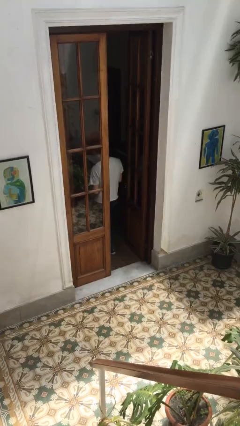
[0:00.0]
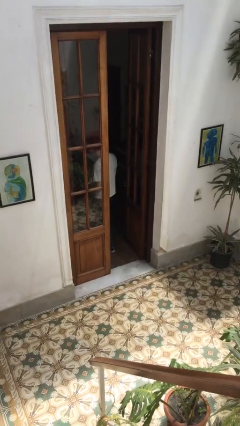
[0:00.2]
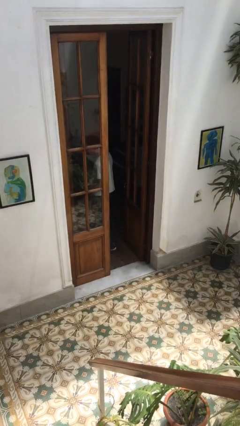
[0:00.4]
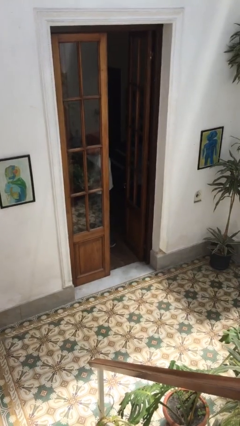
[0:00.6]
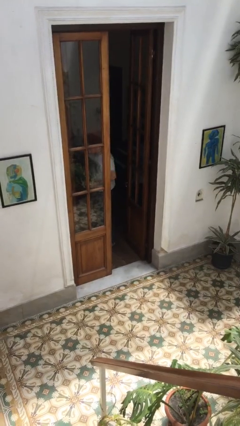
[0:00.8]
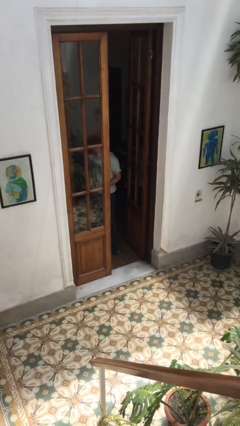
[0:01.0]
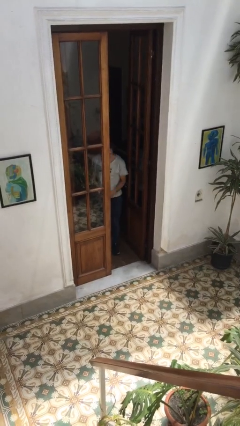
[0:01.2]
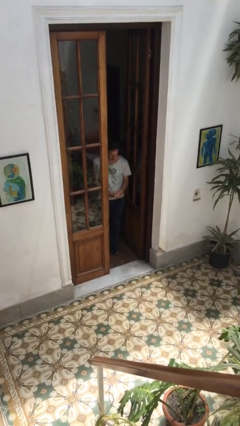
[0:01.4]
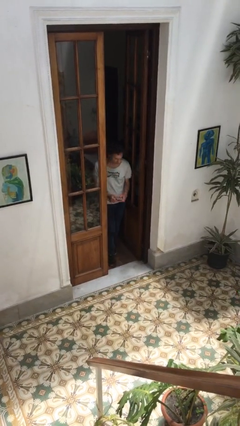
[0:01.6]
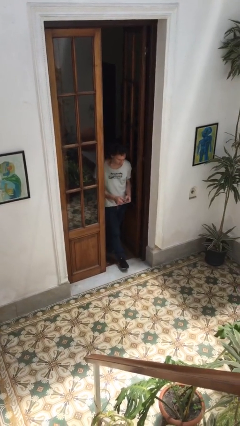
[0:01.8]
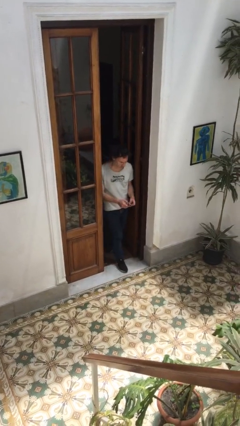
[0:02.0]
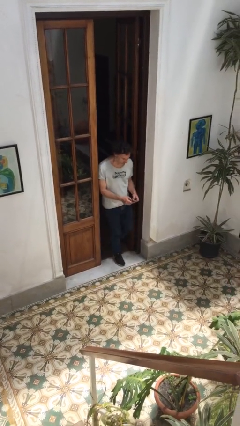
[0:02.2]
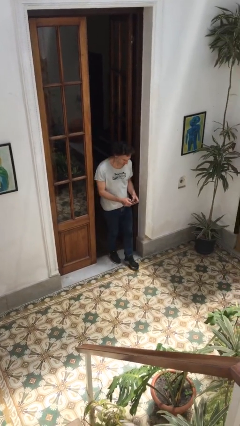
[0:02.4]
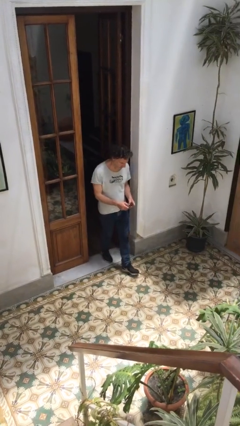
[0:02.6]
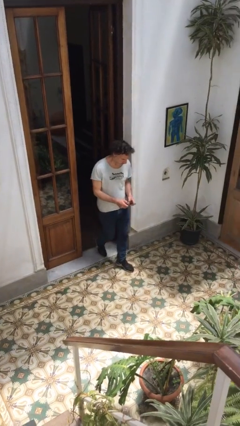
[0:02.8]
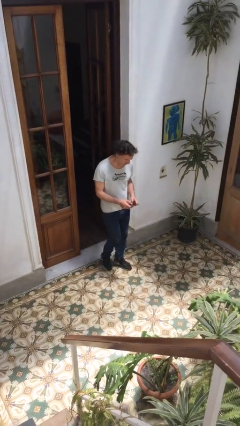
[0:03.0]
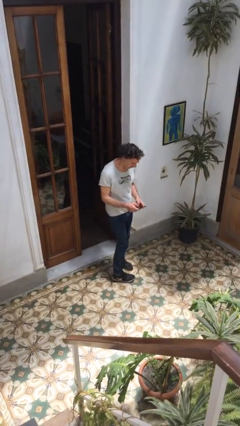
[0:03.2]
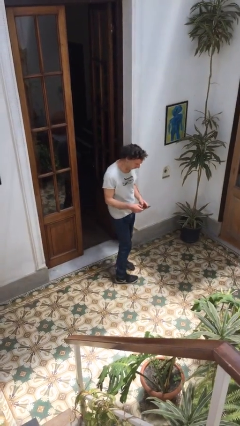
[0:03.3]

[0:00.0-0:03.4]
person enters scene through structure

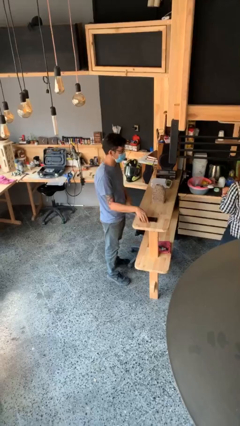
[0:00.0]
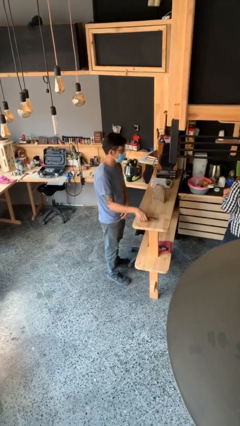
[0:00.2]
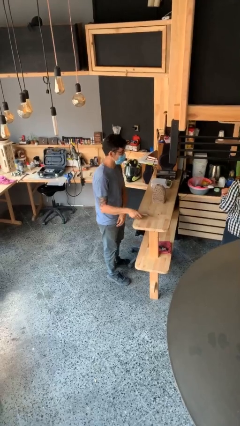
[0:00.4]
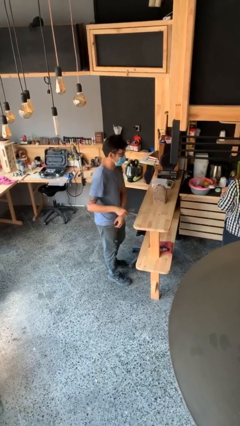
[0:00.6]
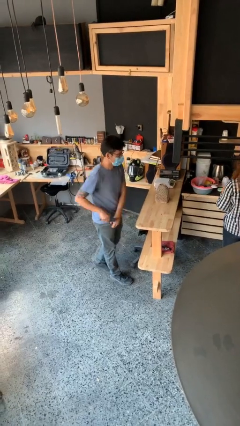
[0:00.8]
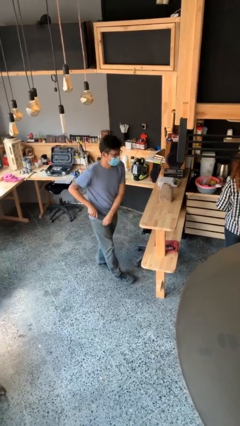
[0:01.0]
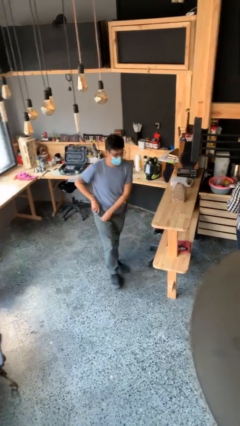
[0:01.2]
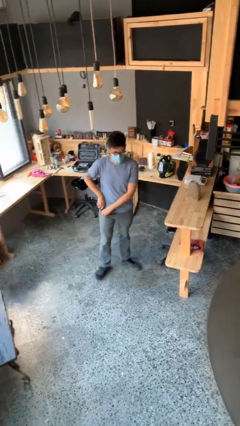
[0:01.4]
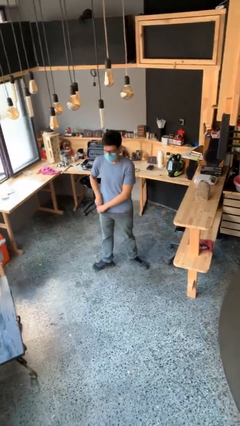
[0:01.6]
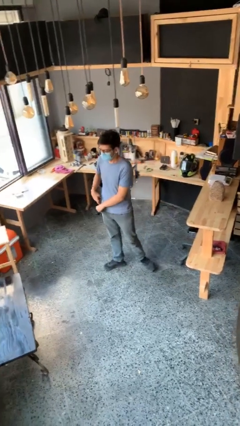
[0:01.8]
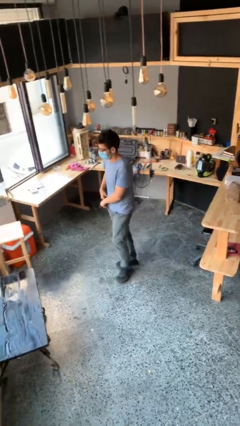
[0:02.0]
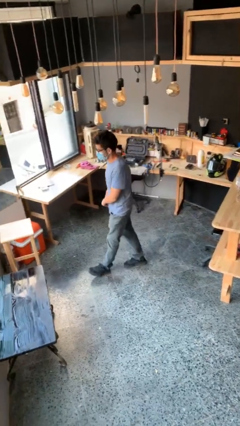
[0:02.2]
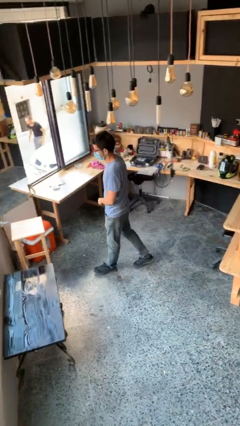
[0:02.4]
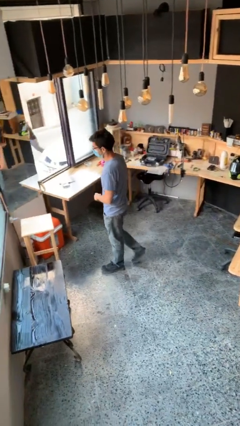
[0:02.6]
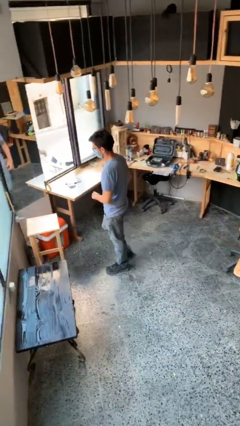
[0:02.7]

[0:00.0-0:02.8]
person steals object from person

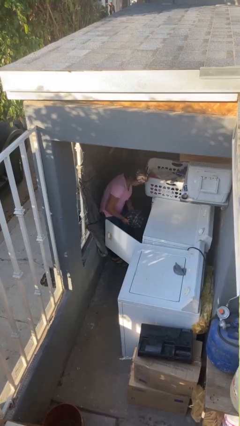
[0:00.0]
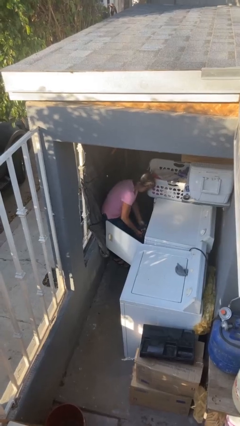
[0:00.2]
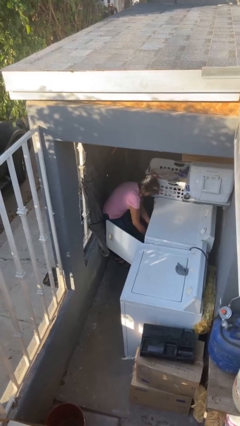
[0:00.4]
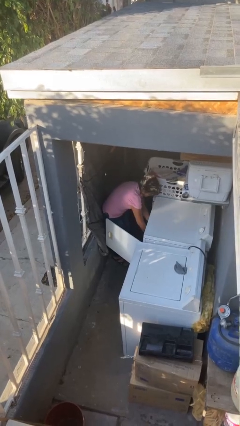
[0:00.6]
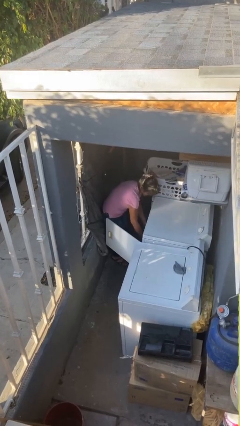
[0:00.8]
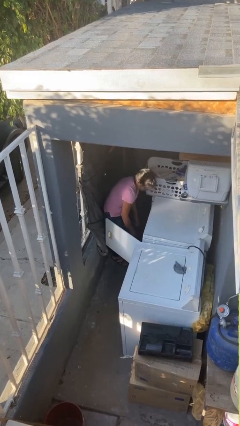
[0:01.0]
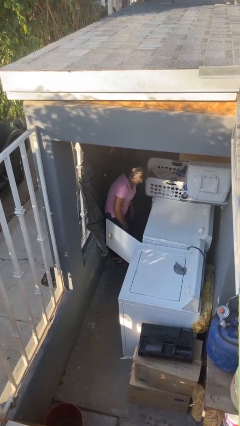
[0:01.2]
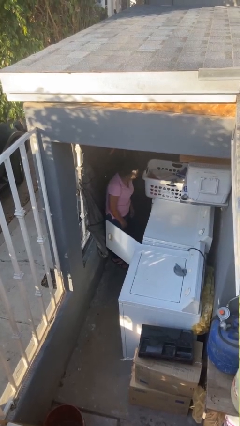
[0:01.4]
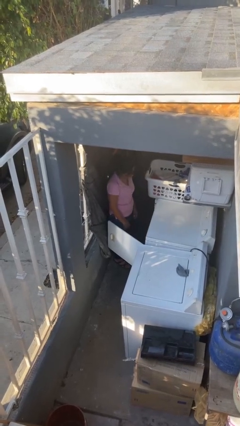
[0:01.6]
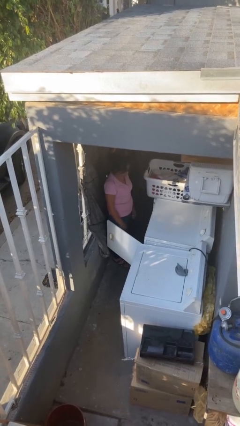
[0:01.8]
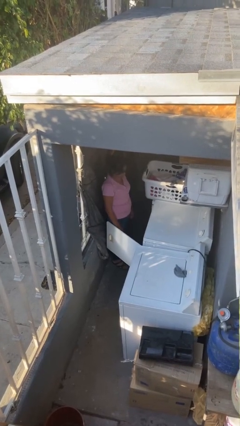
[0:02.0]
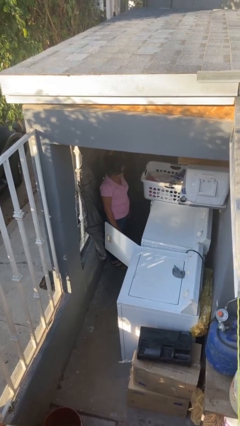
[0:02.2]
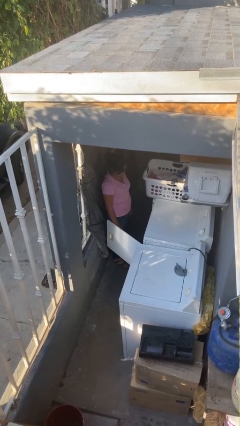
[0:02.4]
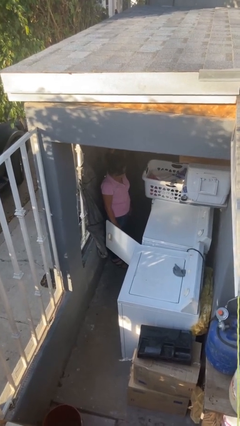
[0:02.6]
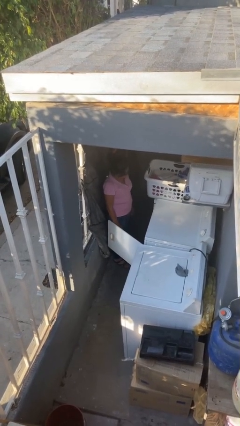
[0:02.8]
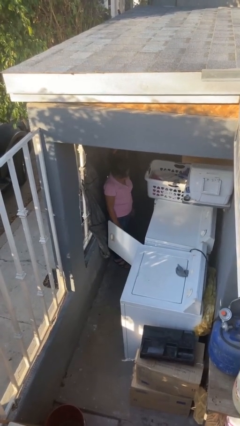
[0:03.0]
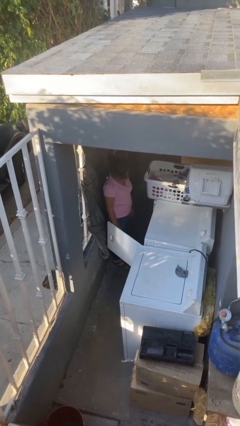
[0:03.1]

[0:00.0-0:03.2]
person loads dryer

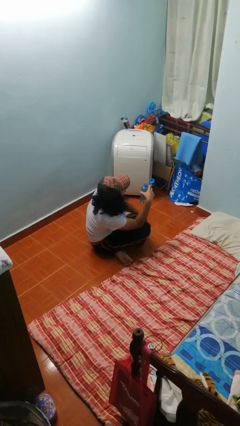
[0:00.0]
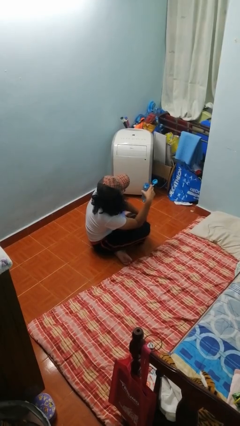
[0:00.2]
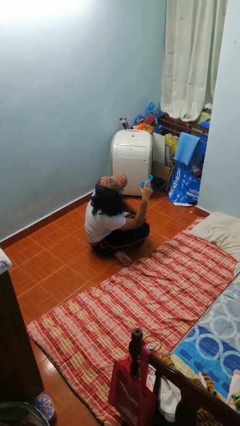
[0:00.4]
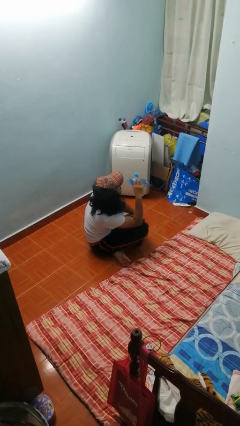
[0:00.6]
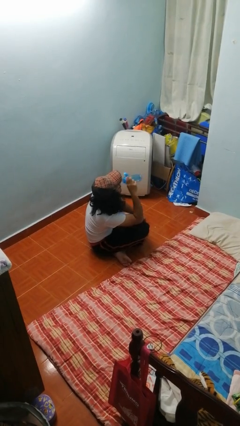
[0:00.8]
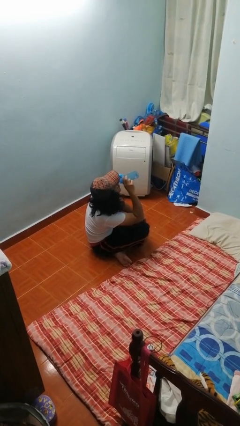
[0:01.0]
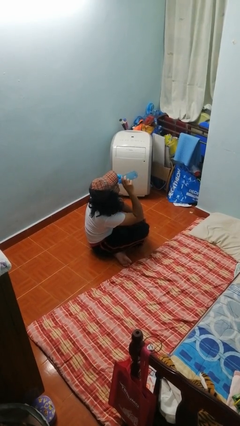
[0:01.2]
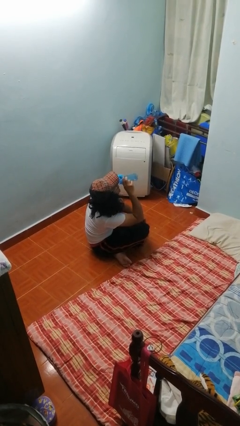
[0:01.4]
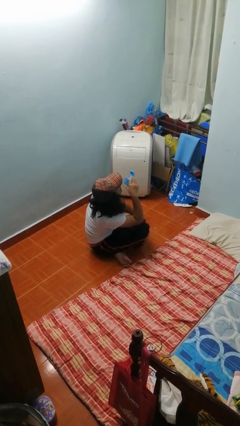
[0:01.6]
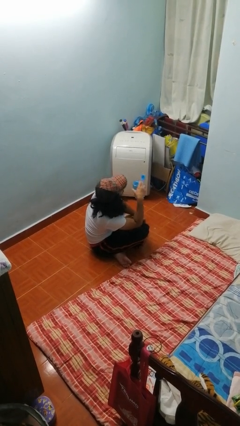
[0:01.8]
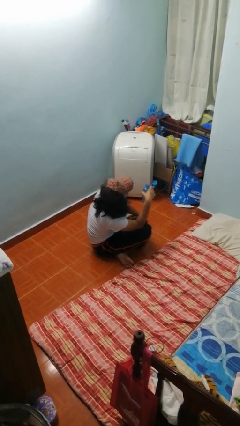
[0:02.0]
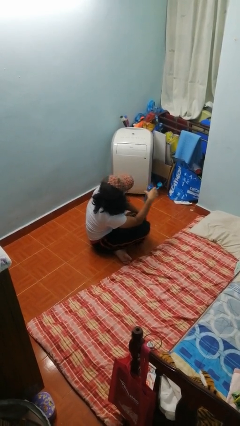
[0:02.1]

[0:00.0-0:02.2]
person drinks from bottle

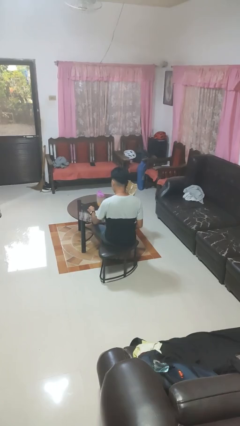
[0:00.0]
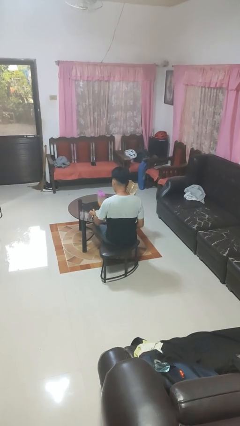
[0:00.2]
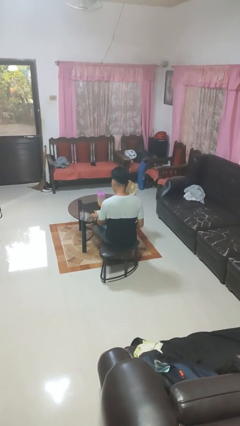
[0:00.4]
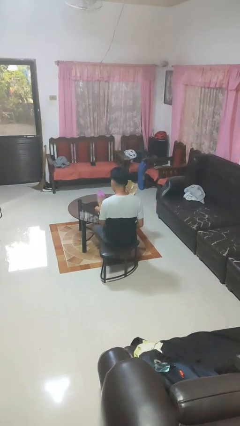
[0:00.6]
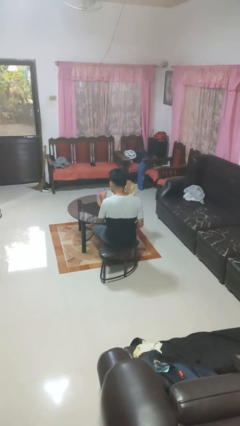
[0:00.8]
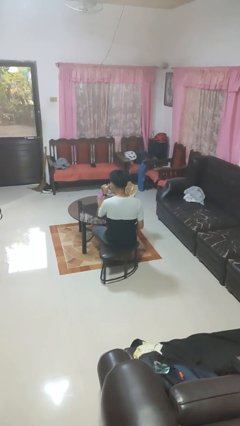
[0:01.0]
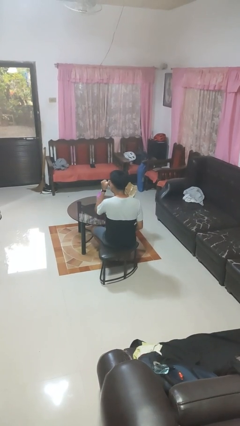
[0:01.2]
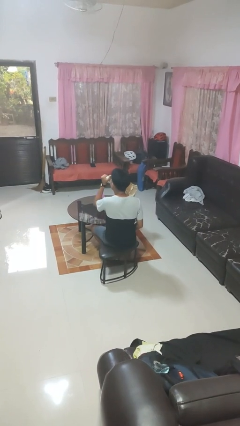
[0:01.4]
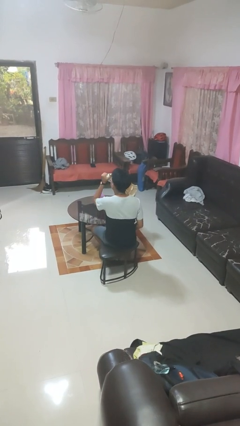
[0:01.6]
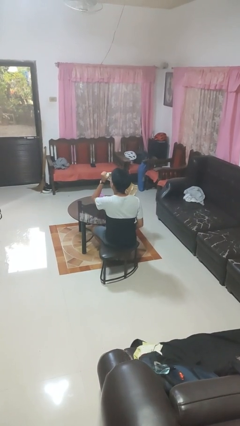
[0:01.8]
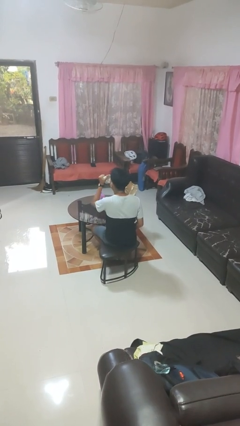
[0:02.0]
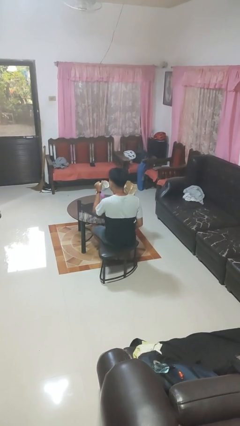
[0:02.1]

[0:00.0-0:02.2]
person drinks from mug

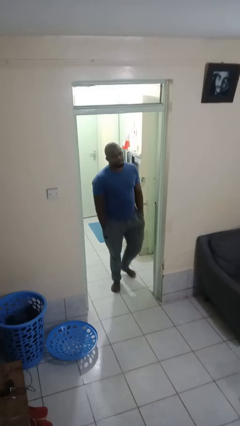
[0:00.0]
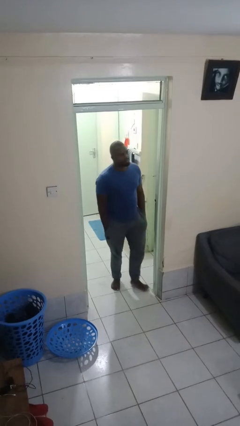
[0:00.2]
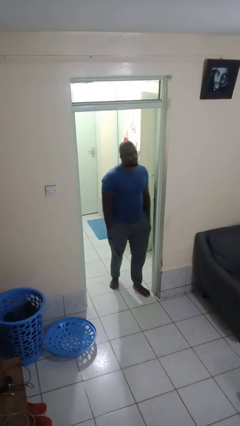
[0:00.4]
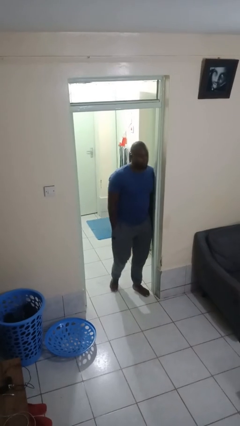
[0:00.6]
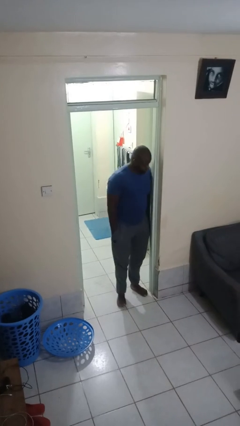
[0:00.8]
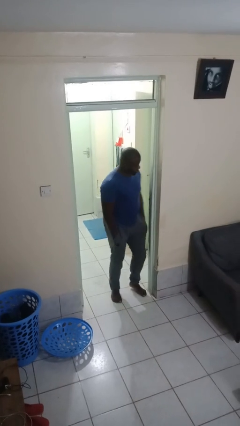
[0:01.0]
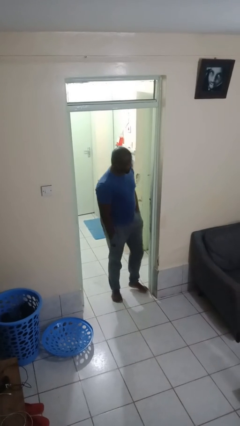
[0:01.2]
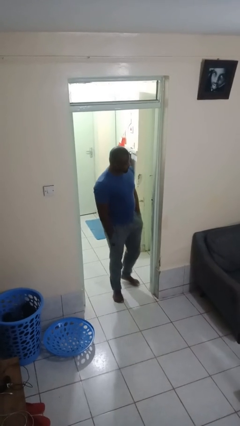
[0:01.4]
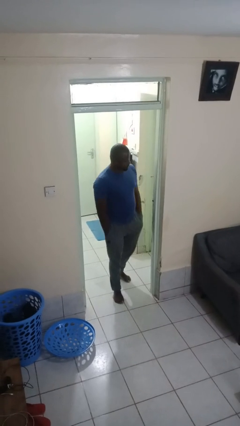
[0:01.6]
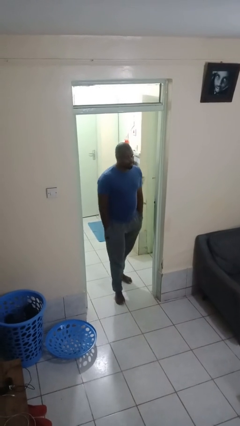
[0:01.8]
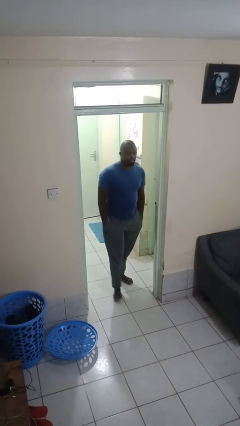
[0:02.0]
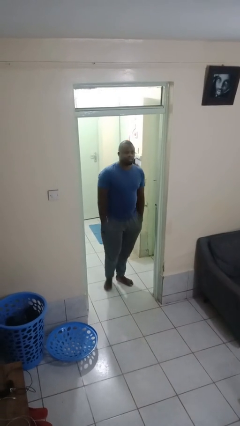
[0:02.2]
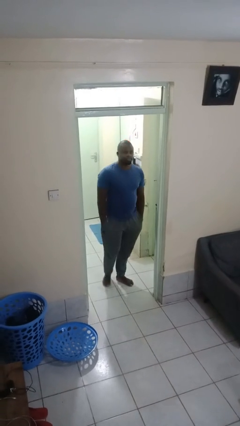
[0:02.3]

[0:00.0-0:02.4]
person bumps into wall

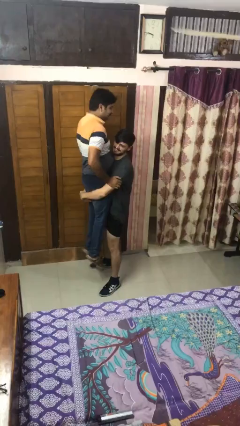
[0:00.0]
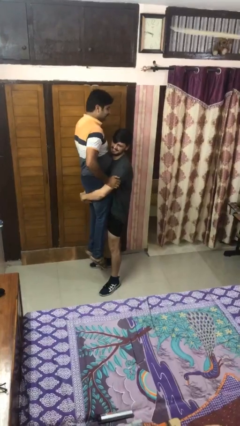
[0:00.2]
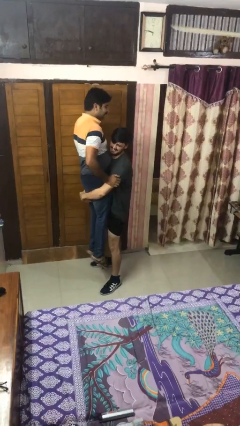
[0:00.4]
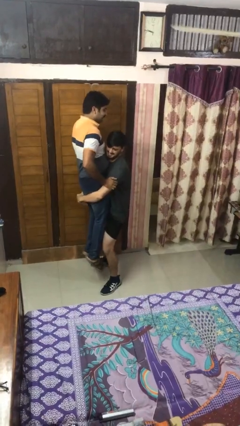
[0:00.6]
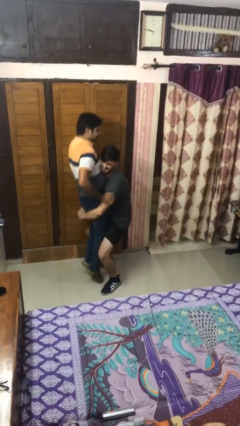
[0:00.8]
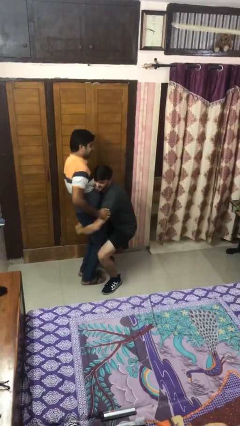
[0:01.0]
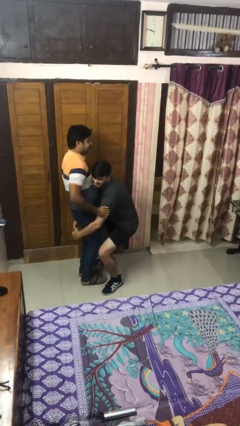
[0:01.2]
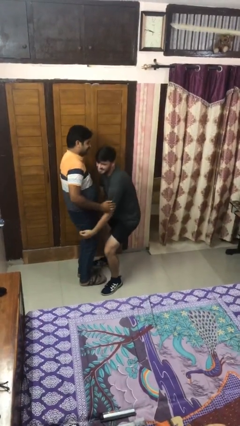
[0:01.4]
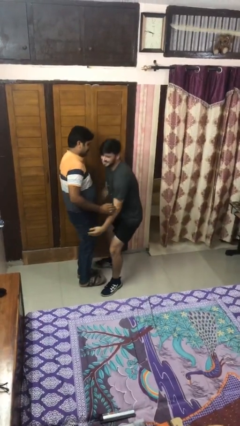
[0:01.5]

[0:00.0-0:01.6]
person puts down person
